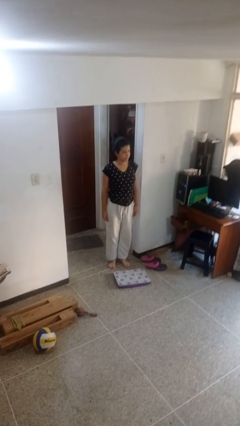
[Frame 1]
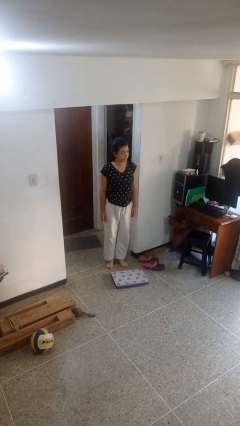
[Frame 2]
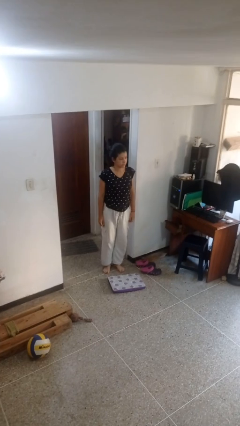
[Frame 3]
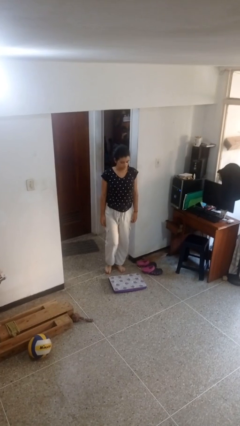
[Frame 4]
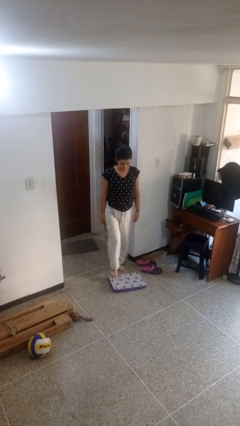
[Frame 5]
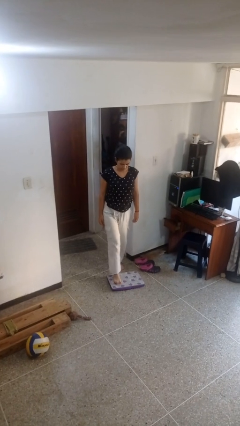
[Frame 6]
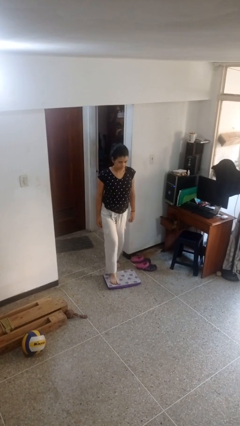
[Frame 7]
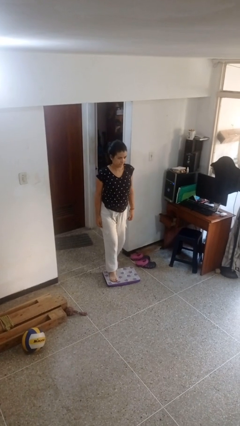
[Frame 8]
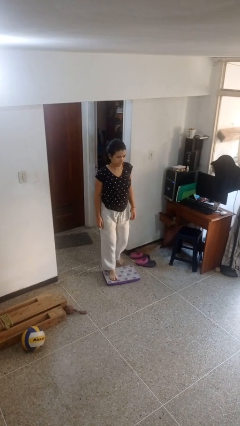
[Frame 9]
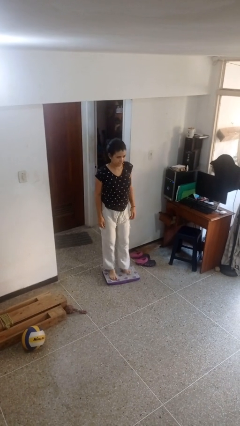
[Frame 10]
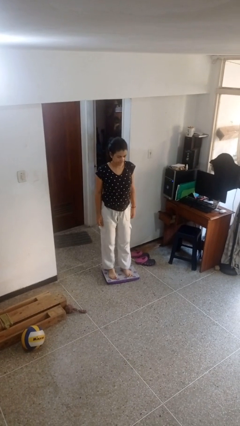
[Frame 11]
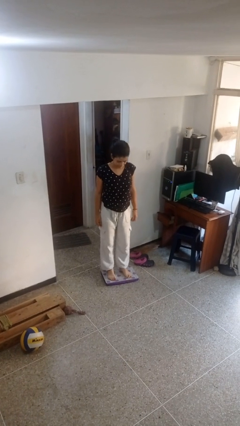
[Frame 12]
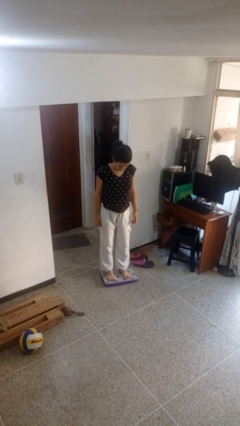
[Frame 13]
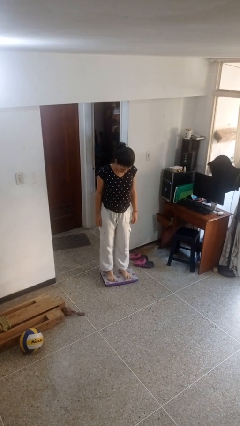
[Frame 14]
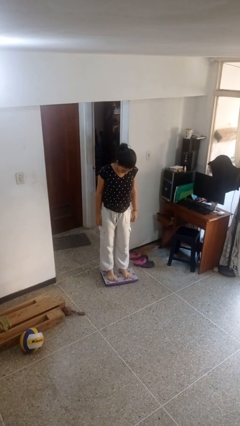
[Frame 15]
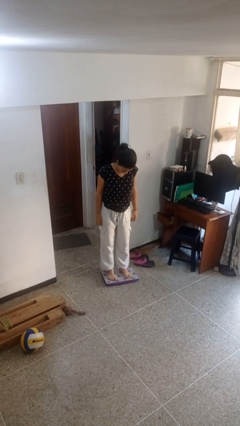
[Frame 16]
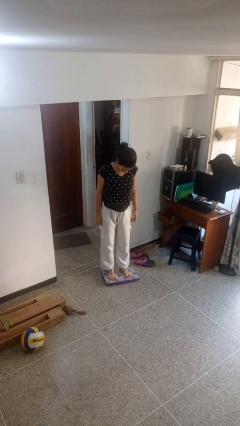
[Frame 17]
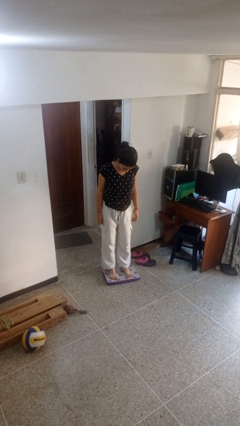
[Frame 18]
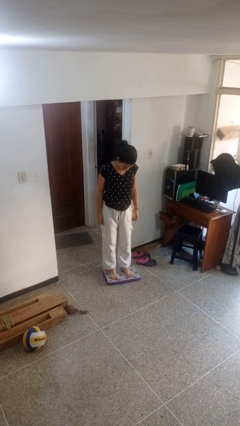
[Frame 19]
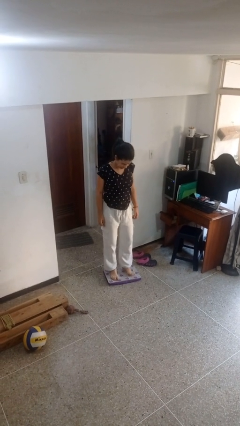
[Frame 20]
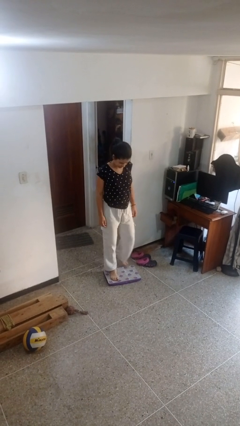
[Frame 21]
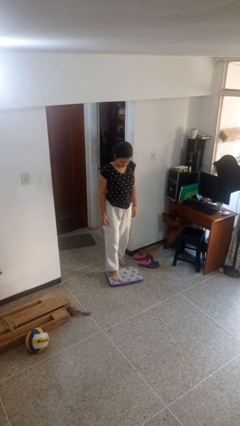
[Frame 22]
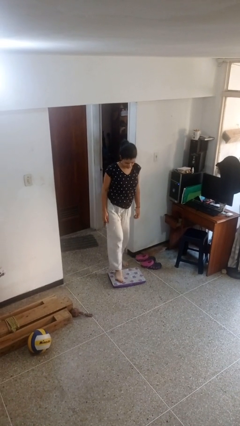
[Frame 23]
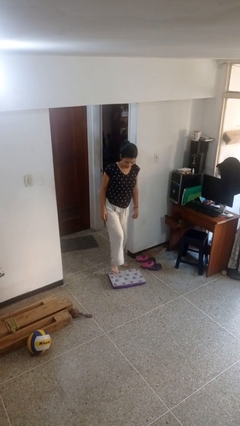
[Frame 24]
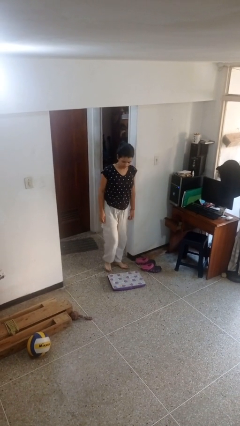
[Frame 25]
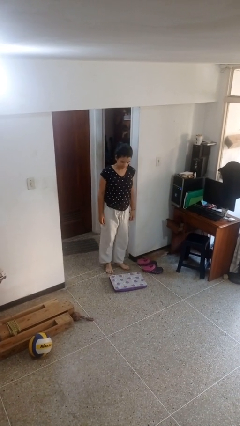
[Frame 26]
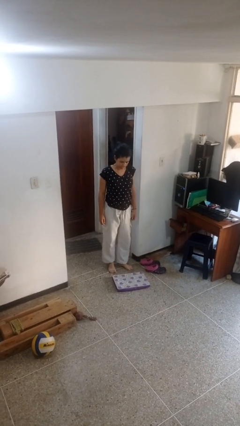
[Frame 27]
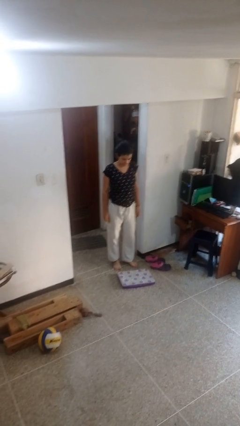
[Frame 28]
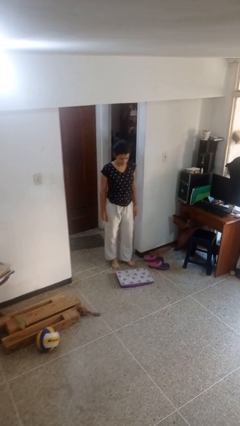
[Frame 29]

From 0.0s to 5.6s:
person uses bodyweight scale

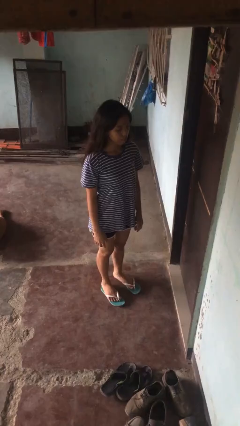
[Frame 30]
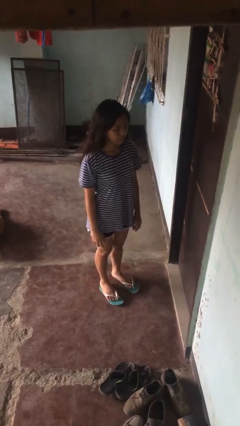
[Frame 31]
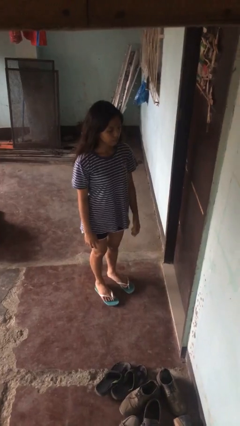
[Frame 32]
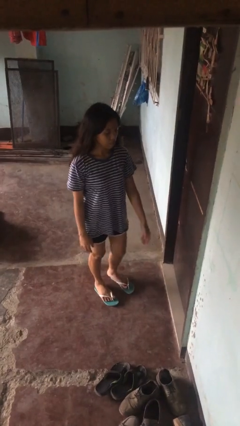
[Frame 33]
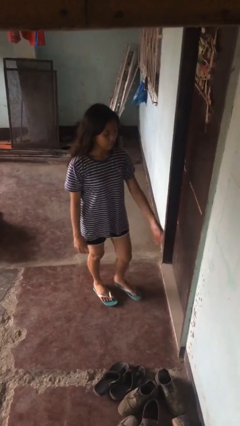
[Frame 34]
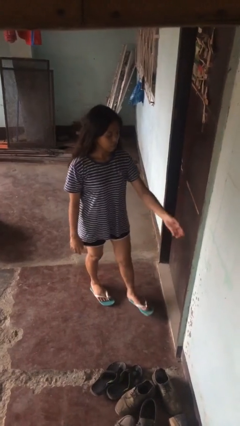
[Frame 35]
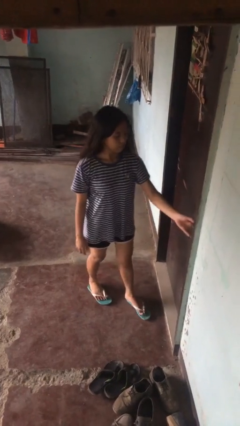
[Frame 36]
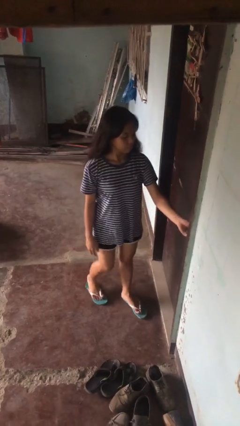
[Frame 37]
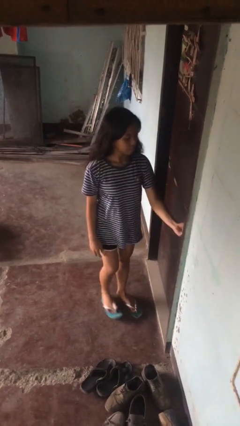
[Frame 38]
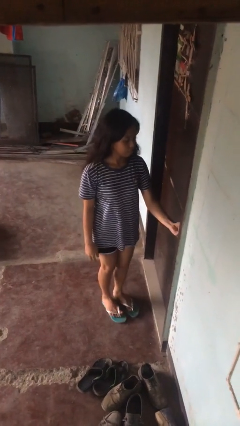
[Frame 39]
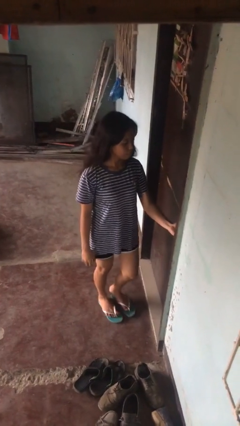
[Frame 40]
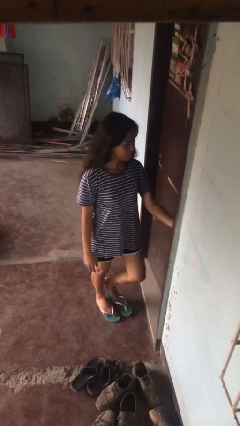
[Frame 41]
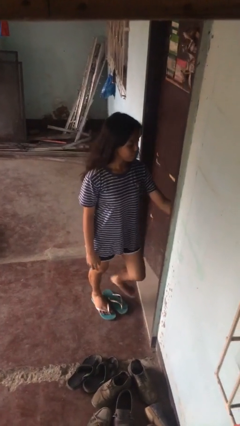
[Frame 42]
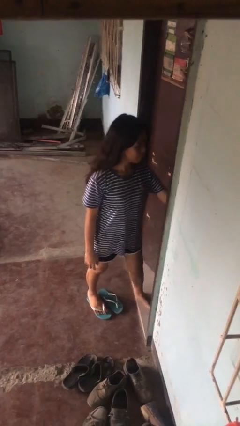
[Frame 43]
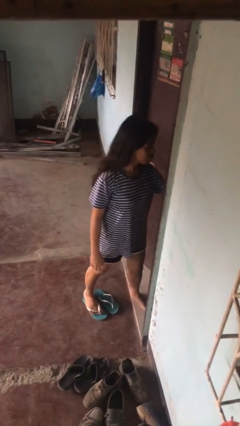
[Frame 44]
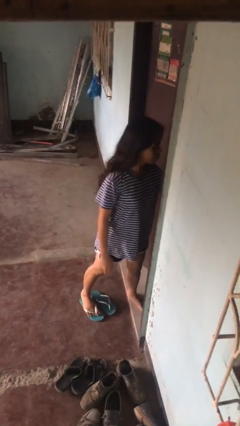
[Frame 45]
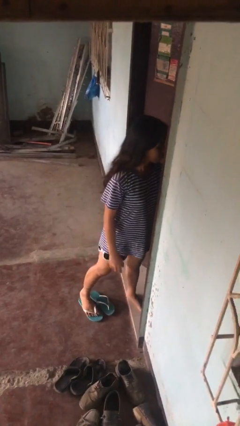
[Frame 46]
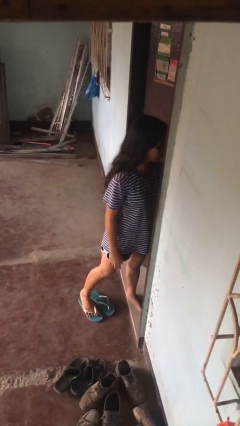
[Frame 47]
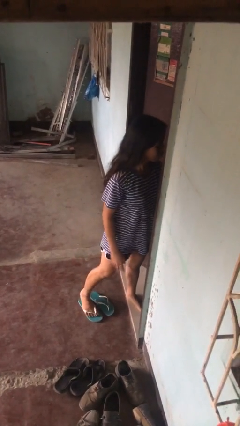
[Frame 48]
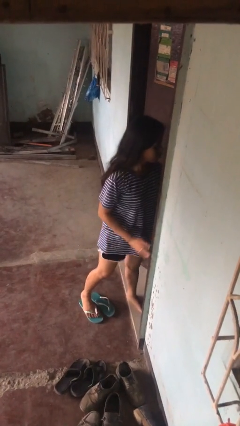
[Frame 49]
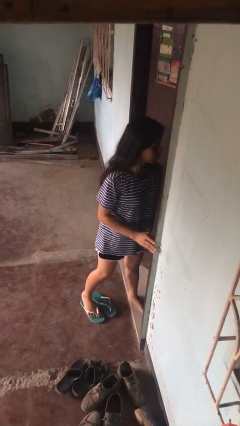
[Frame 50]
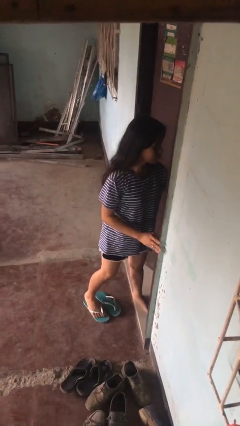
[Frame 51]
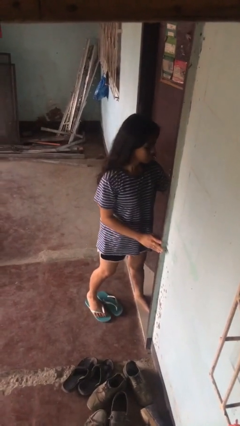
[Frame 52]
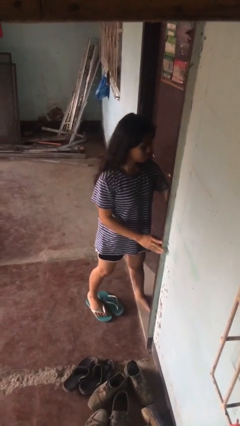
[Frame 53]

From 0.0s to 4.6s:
person opens facility door

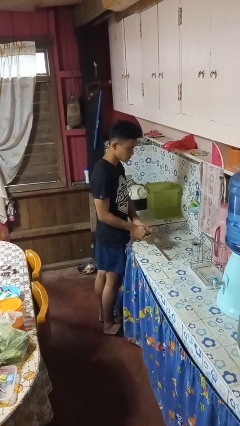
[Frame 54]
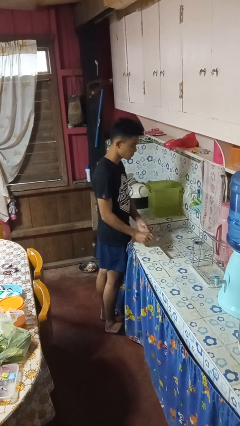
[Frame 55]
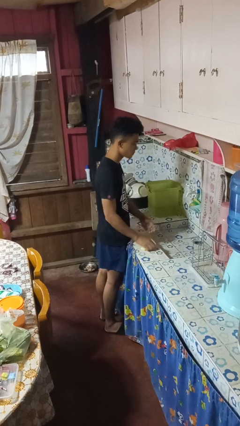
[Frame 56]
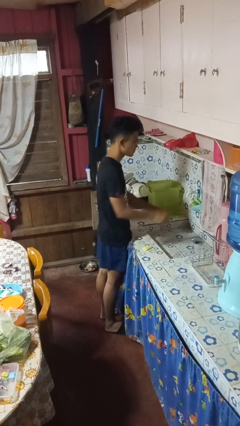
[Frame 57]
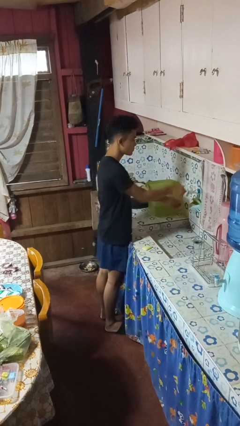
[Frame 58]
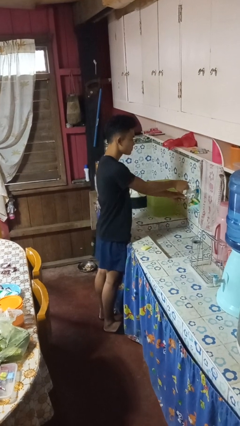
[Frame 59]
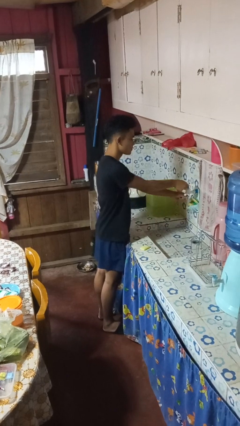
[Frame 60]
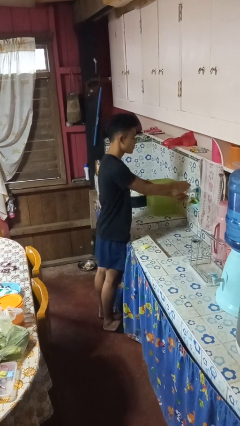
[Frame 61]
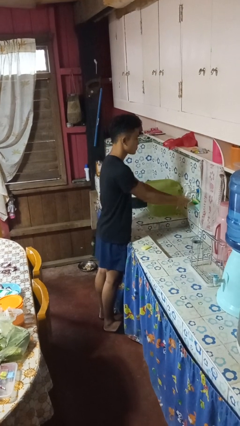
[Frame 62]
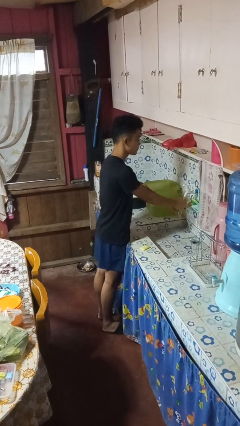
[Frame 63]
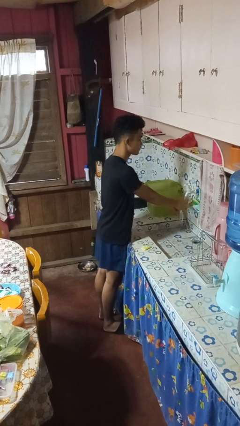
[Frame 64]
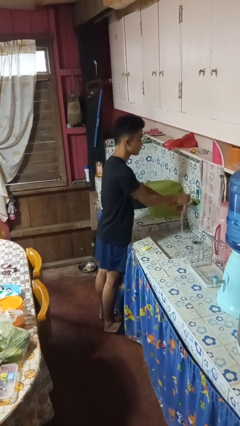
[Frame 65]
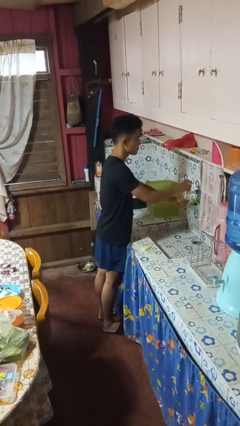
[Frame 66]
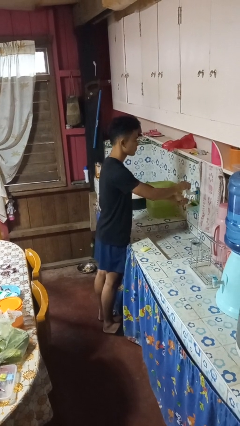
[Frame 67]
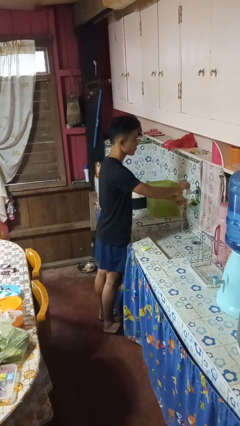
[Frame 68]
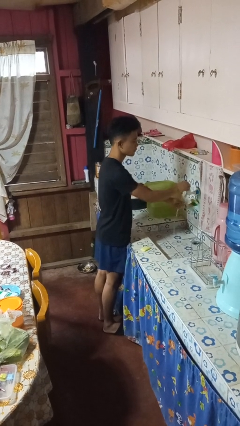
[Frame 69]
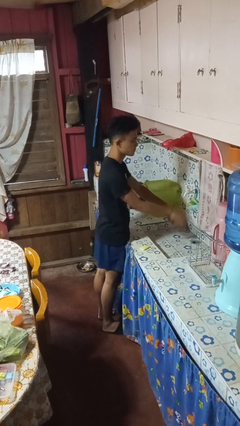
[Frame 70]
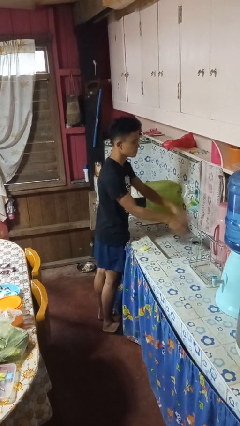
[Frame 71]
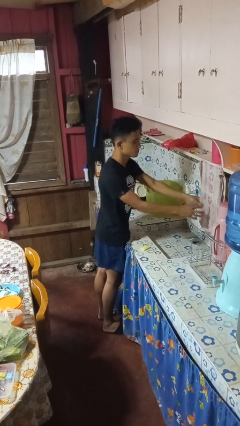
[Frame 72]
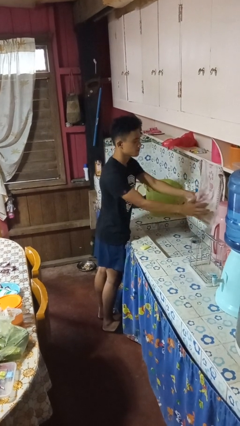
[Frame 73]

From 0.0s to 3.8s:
person washes hands

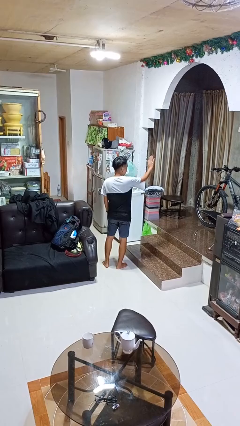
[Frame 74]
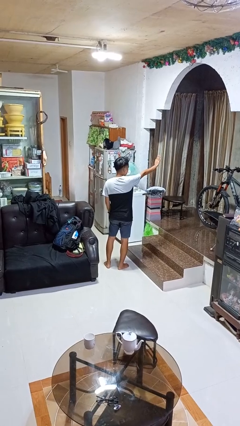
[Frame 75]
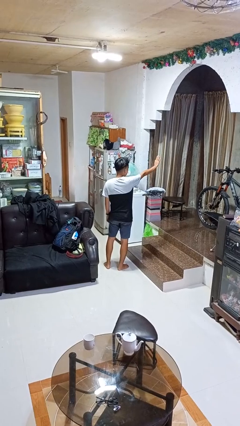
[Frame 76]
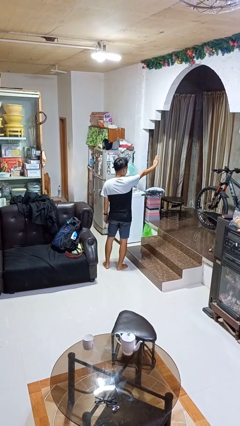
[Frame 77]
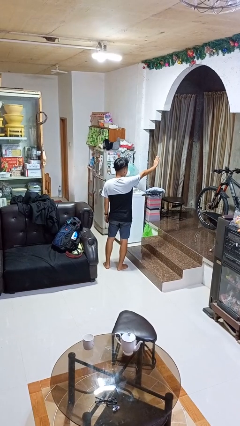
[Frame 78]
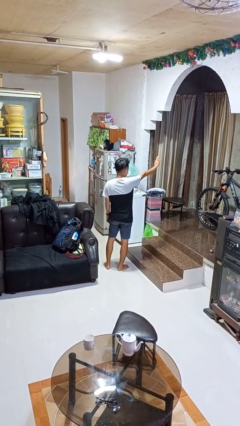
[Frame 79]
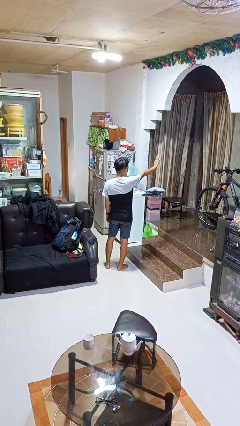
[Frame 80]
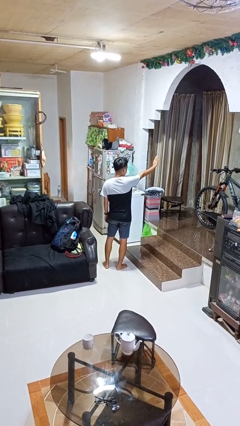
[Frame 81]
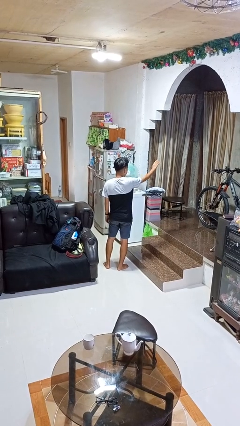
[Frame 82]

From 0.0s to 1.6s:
person gestures stop

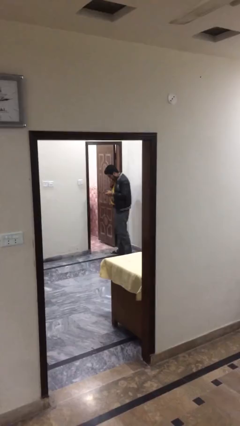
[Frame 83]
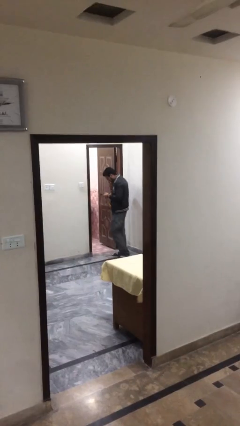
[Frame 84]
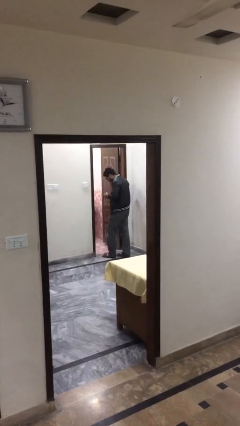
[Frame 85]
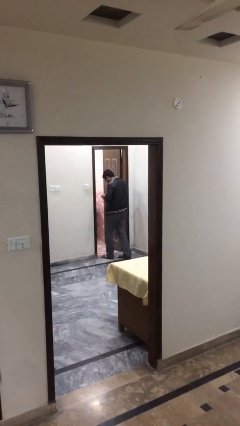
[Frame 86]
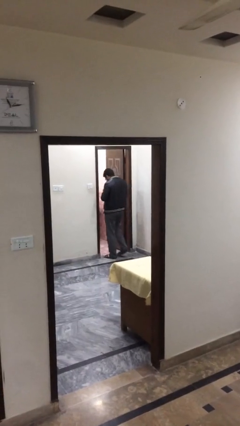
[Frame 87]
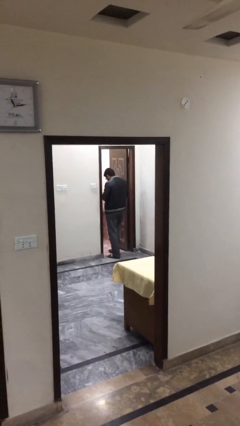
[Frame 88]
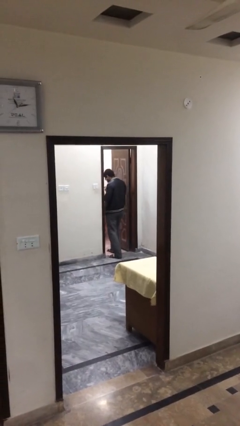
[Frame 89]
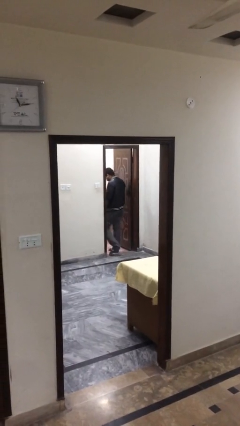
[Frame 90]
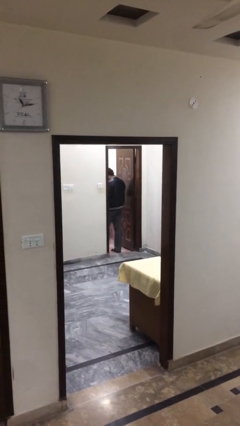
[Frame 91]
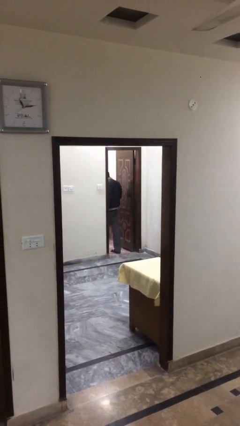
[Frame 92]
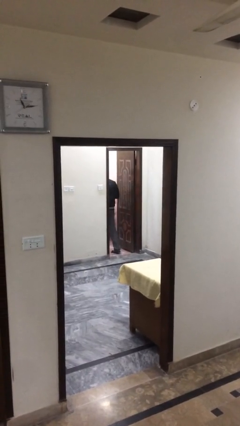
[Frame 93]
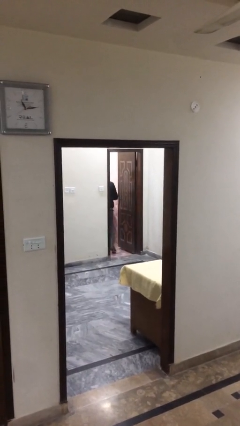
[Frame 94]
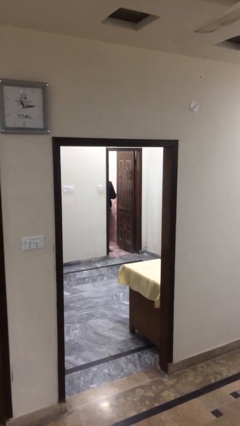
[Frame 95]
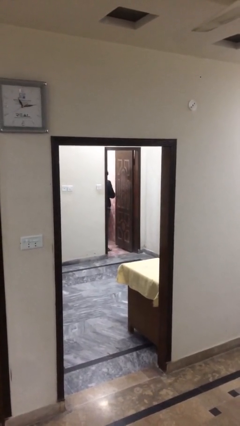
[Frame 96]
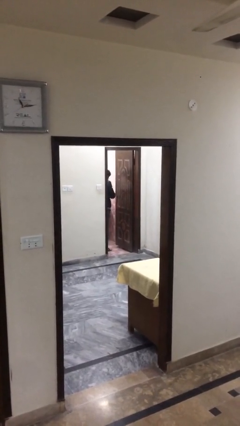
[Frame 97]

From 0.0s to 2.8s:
person enters scene through structure
